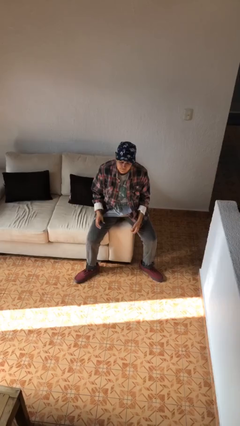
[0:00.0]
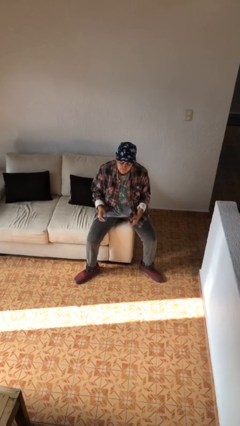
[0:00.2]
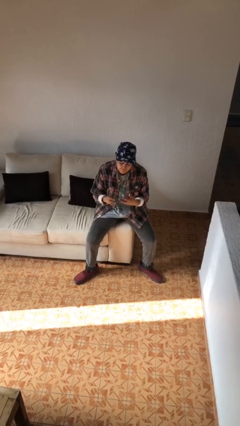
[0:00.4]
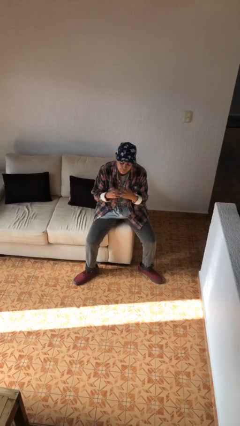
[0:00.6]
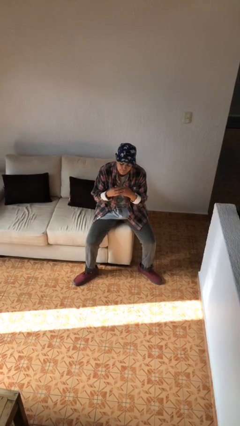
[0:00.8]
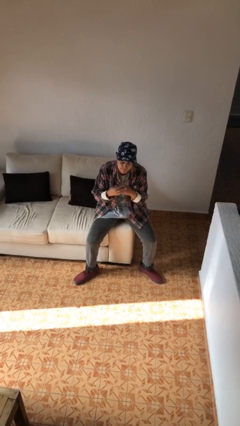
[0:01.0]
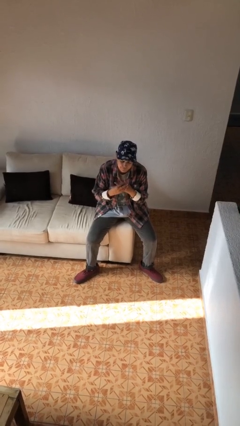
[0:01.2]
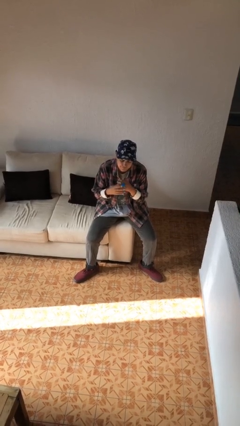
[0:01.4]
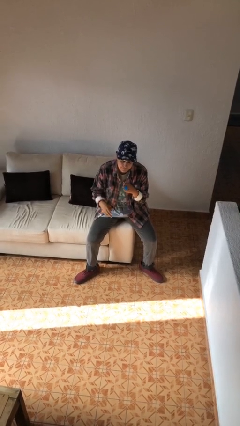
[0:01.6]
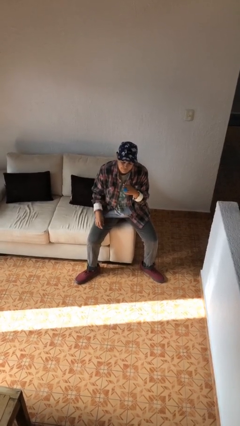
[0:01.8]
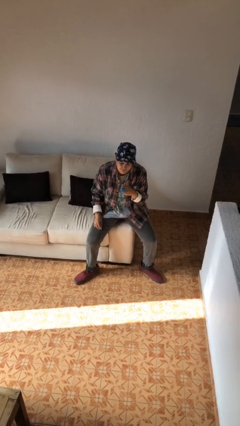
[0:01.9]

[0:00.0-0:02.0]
person puts on ring

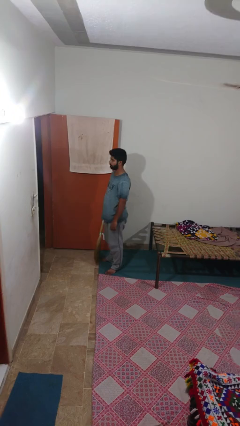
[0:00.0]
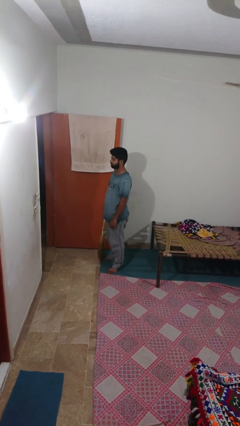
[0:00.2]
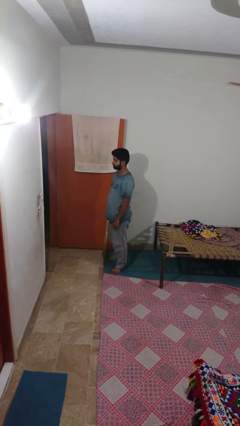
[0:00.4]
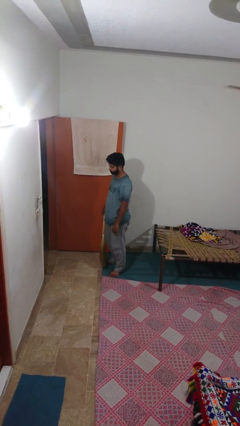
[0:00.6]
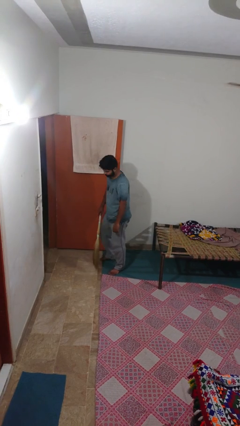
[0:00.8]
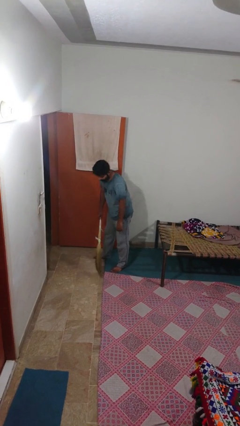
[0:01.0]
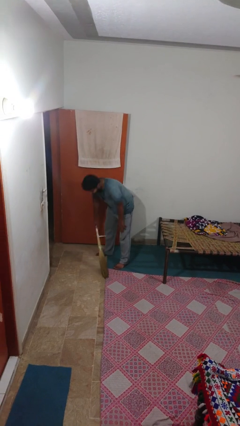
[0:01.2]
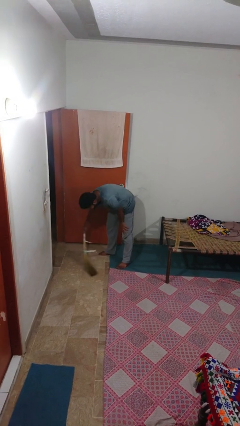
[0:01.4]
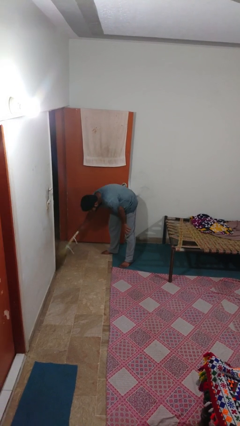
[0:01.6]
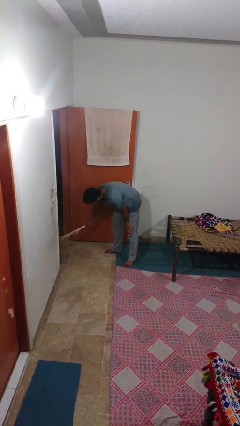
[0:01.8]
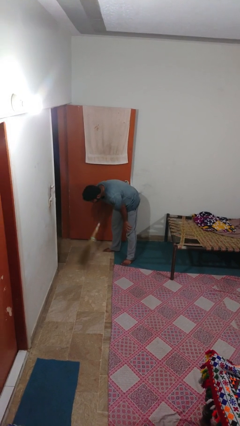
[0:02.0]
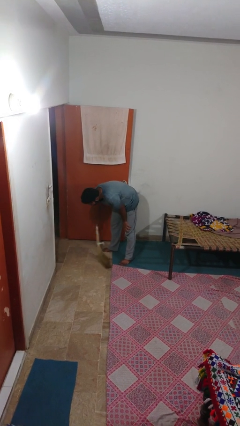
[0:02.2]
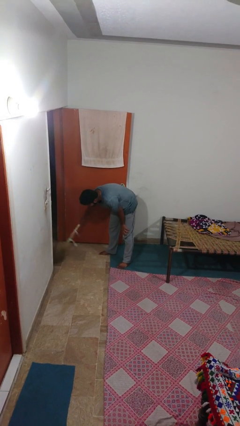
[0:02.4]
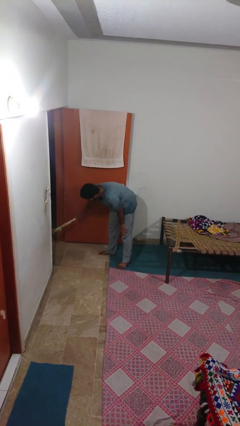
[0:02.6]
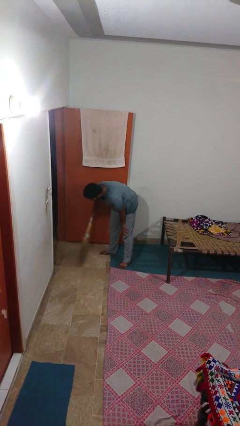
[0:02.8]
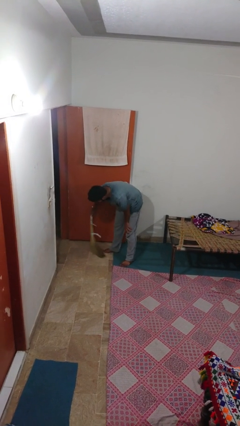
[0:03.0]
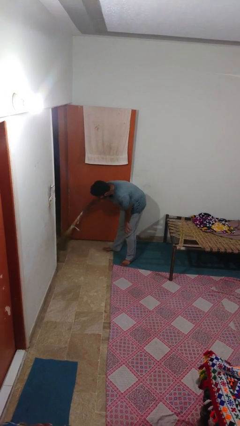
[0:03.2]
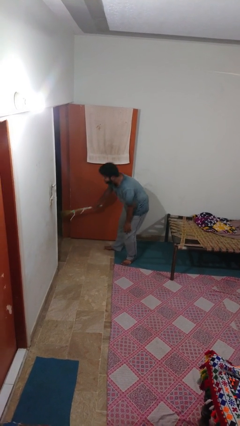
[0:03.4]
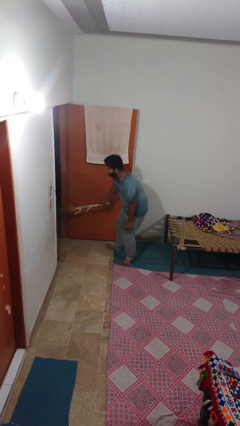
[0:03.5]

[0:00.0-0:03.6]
person sweeps floor

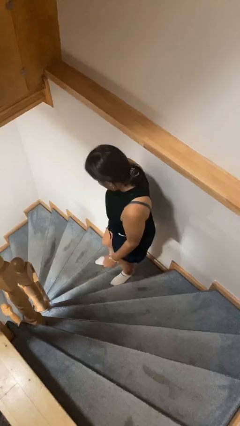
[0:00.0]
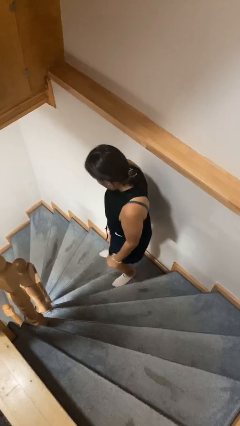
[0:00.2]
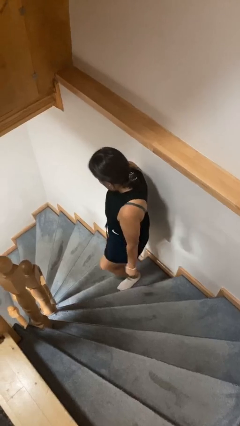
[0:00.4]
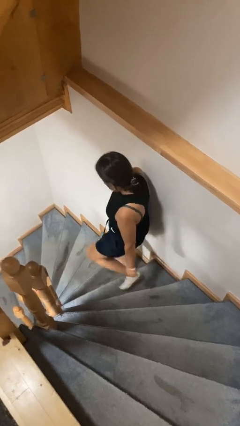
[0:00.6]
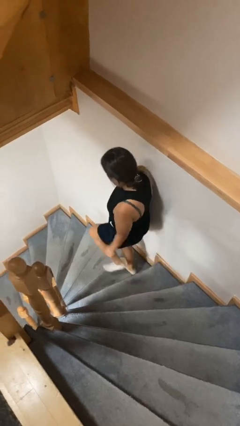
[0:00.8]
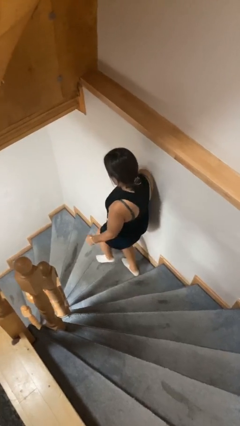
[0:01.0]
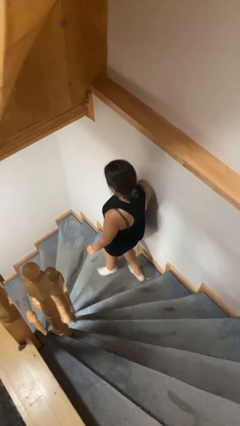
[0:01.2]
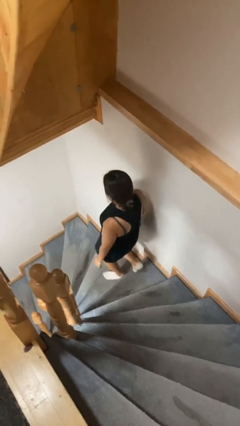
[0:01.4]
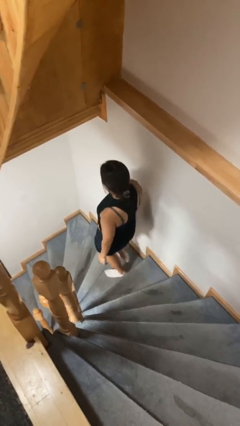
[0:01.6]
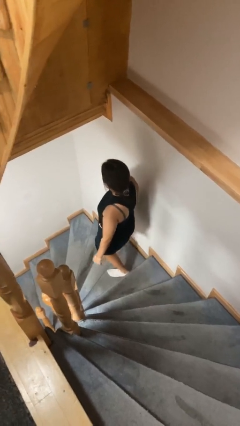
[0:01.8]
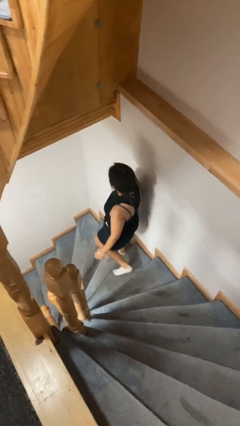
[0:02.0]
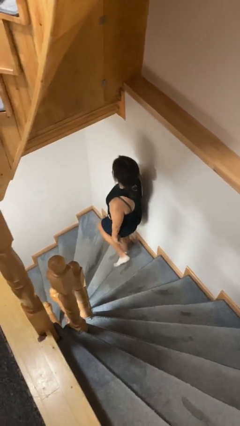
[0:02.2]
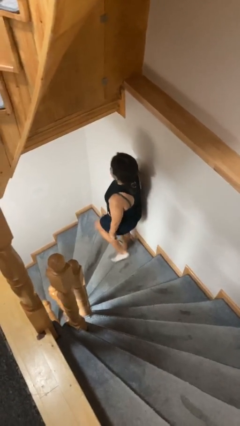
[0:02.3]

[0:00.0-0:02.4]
person climbs down stairs

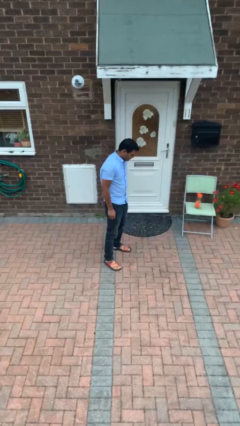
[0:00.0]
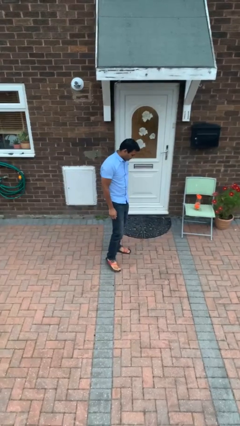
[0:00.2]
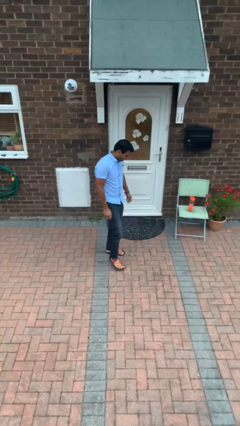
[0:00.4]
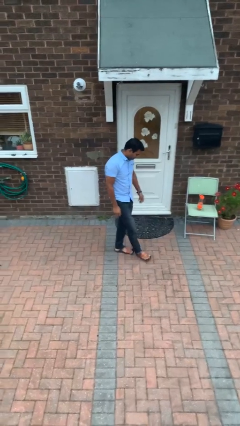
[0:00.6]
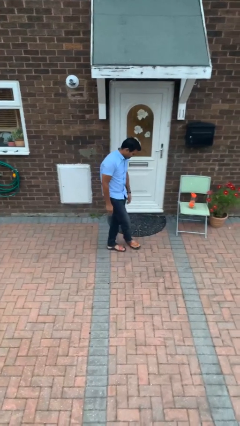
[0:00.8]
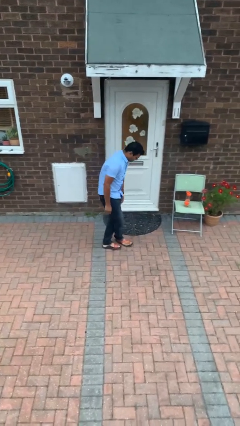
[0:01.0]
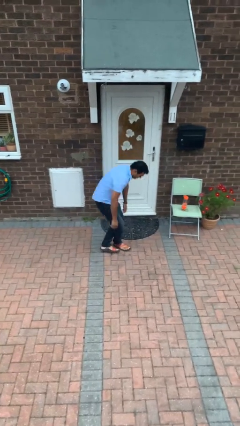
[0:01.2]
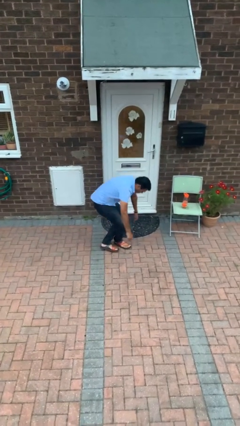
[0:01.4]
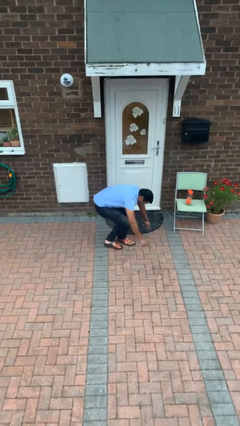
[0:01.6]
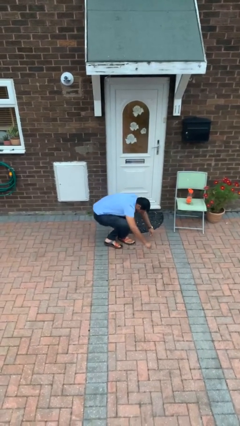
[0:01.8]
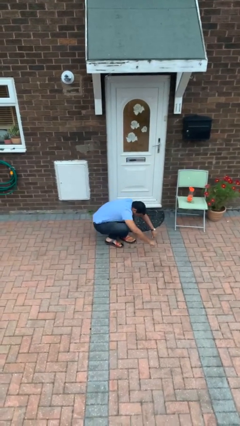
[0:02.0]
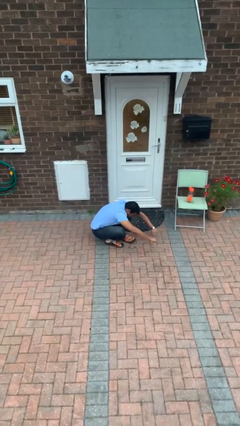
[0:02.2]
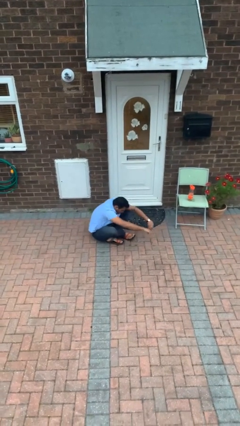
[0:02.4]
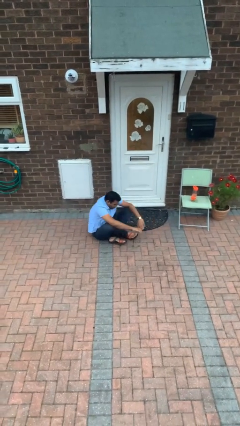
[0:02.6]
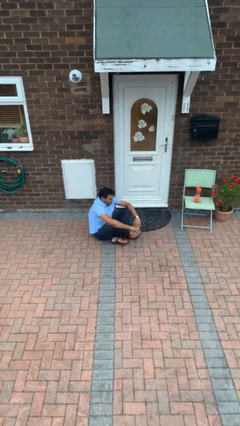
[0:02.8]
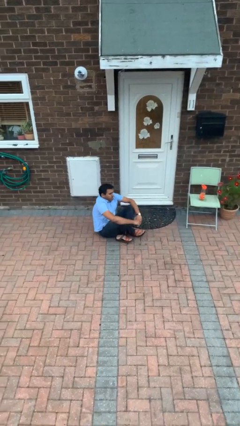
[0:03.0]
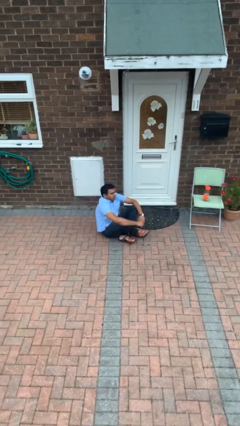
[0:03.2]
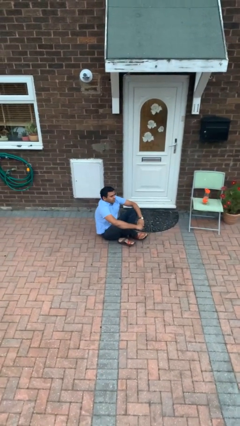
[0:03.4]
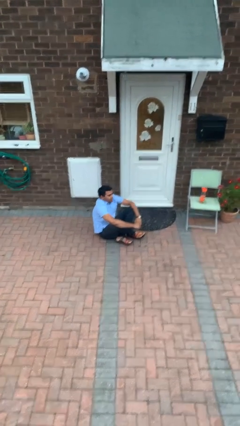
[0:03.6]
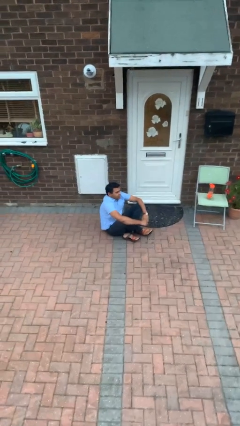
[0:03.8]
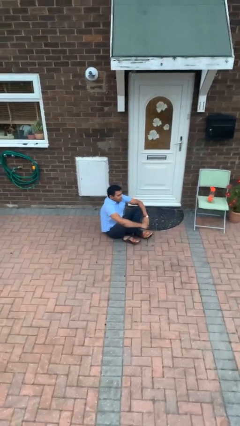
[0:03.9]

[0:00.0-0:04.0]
person sits crisscross

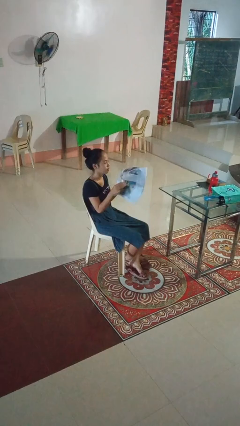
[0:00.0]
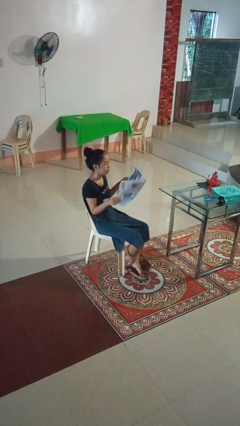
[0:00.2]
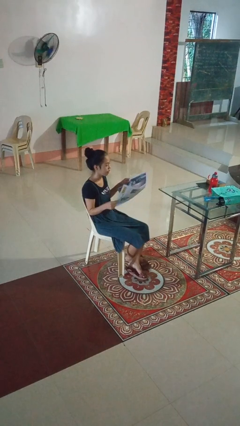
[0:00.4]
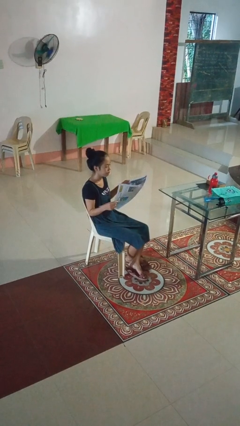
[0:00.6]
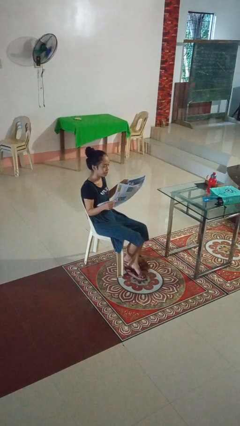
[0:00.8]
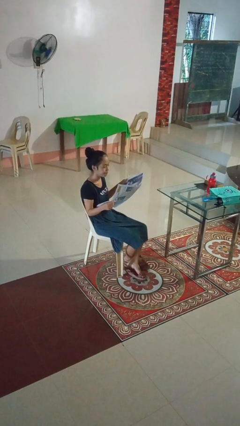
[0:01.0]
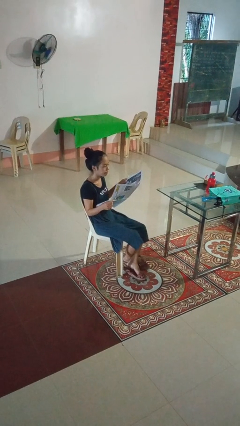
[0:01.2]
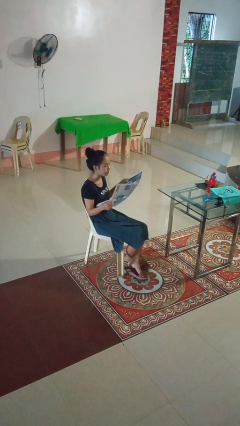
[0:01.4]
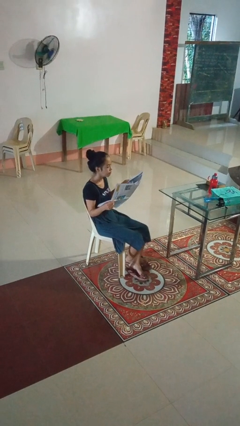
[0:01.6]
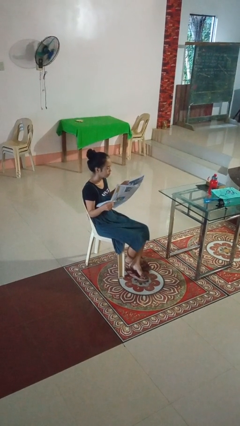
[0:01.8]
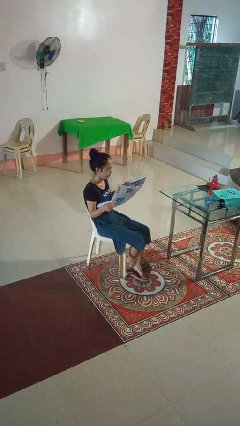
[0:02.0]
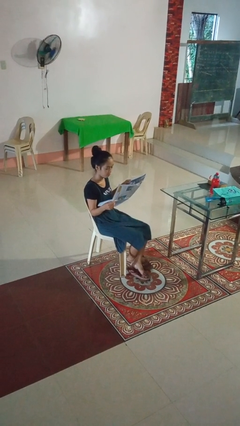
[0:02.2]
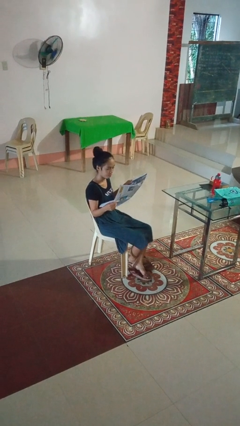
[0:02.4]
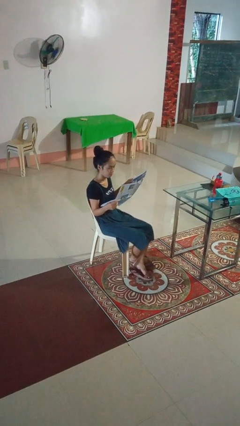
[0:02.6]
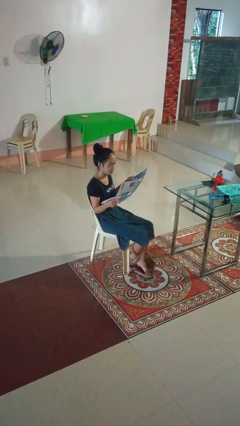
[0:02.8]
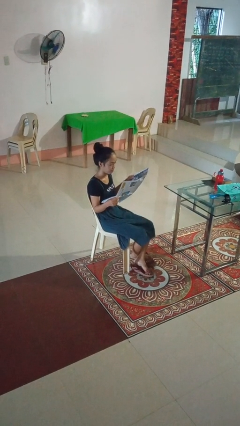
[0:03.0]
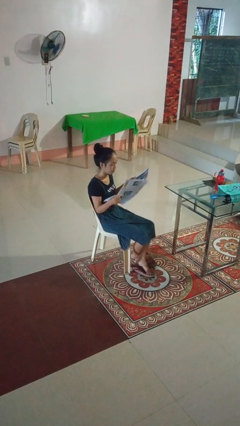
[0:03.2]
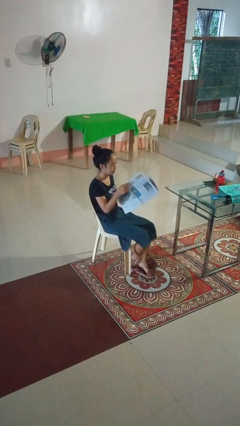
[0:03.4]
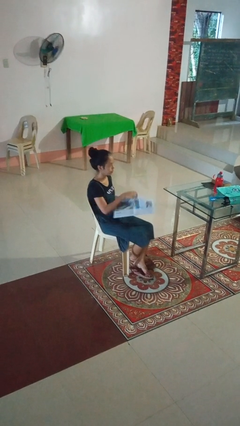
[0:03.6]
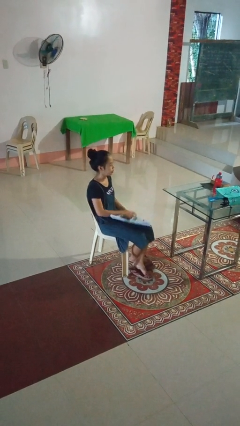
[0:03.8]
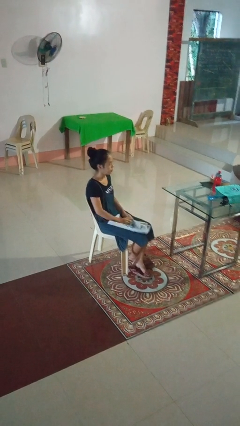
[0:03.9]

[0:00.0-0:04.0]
person reads newspaper

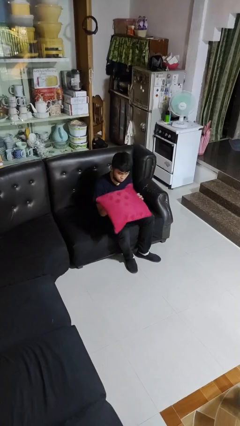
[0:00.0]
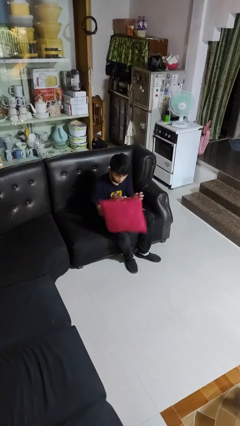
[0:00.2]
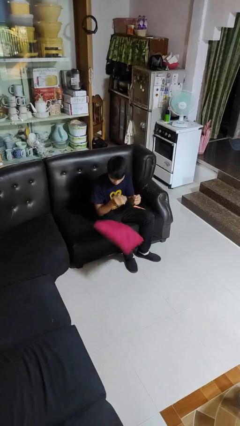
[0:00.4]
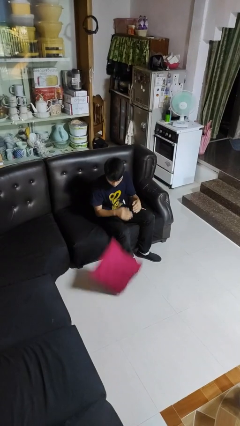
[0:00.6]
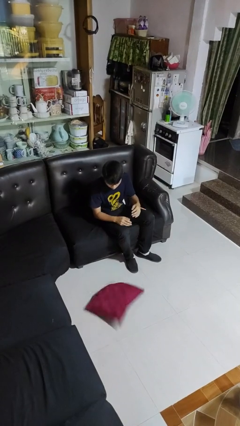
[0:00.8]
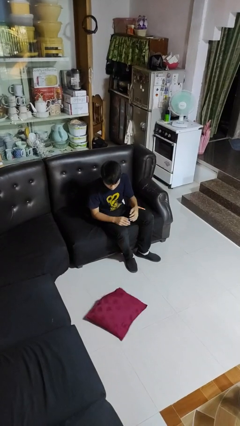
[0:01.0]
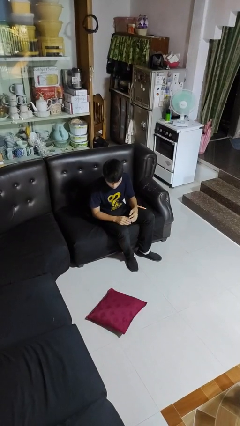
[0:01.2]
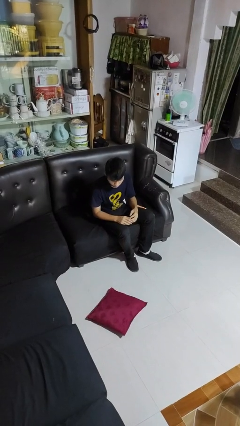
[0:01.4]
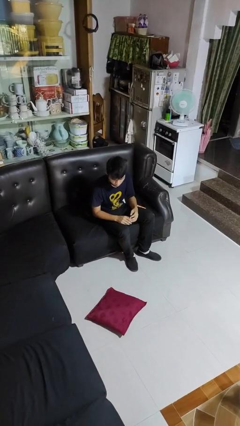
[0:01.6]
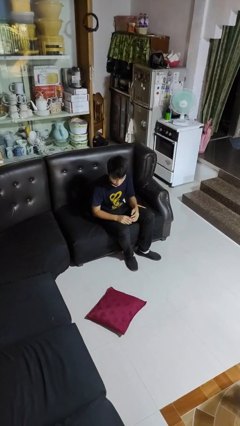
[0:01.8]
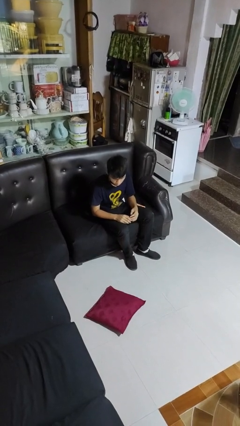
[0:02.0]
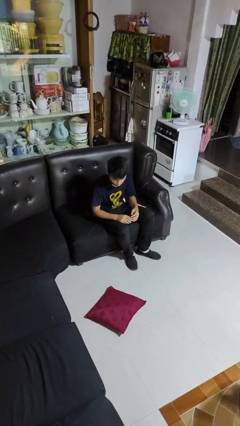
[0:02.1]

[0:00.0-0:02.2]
person drops object
